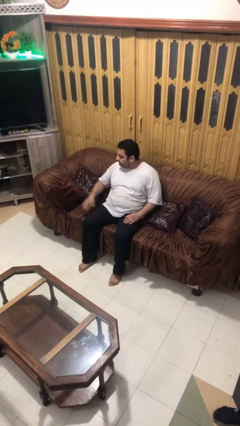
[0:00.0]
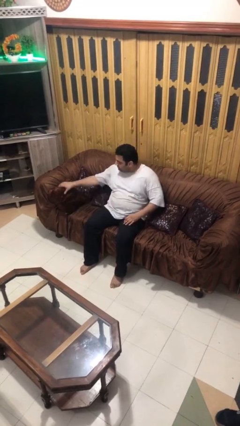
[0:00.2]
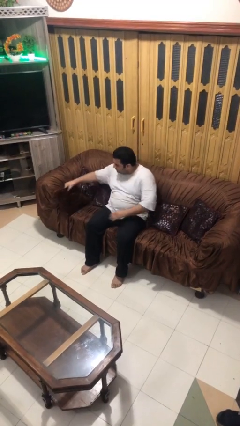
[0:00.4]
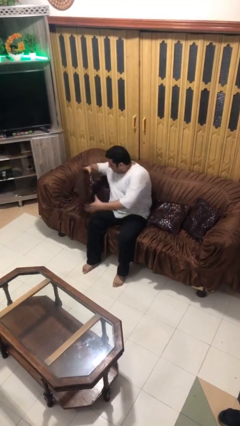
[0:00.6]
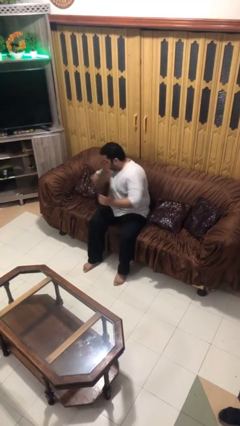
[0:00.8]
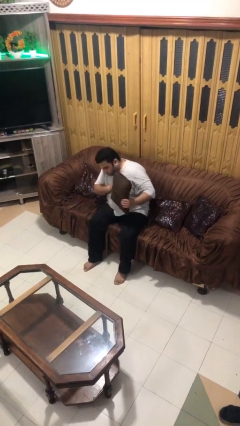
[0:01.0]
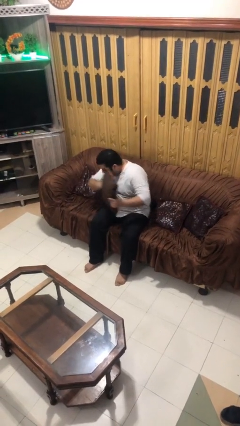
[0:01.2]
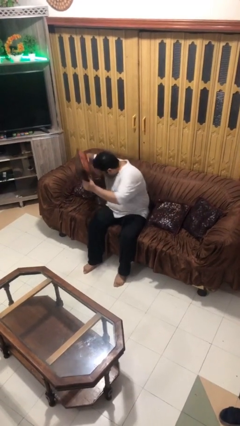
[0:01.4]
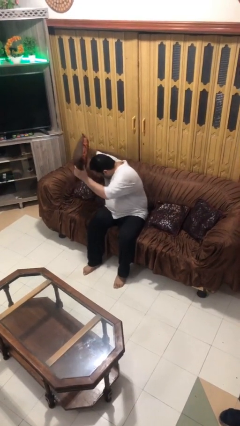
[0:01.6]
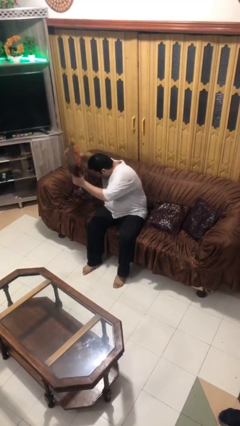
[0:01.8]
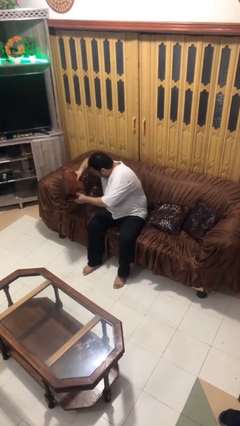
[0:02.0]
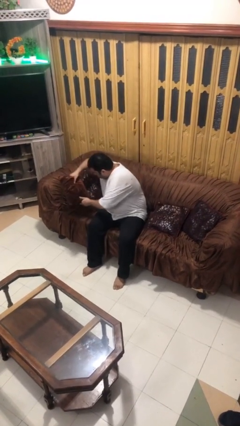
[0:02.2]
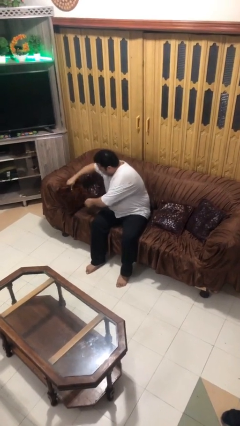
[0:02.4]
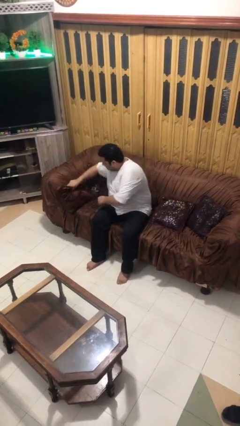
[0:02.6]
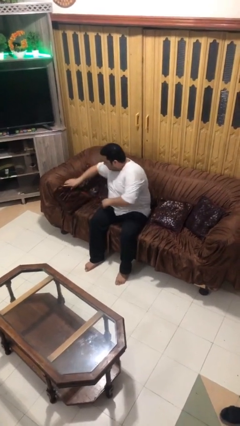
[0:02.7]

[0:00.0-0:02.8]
person searches in couch

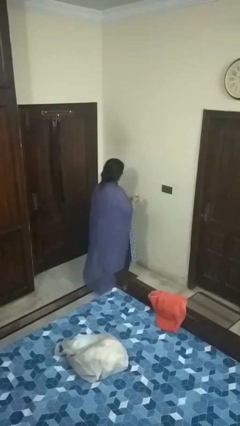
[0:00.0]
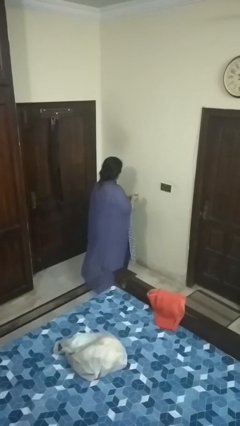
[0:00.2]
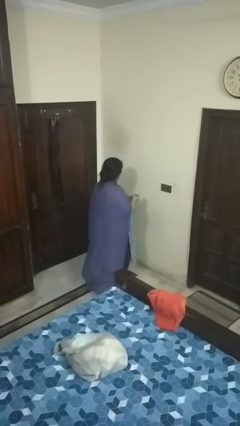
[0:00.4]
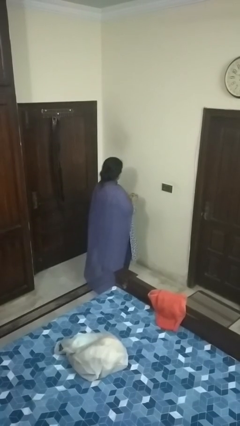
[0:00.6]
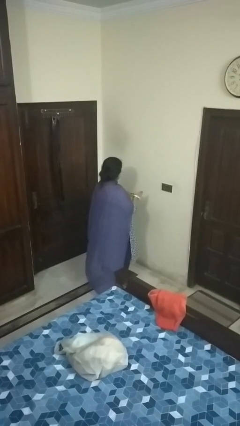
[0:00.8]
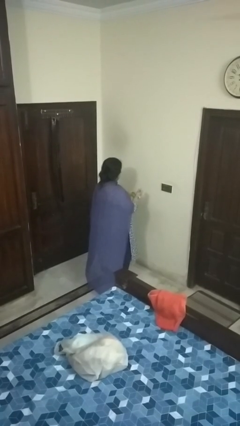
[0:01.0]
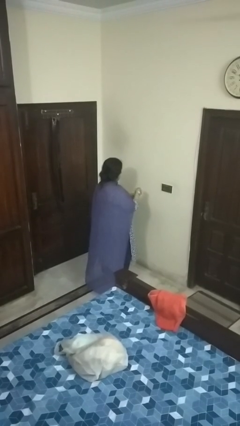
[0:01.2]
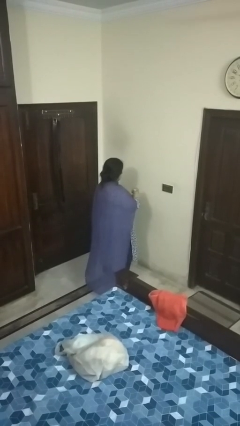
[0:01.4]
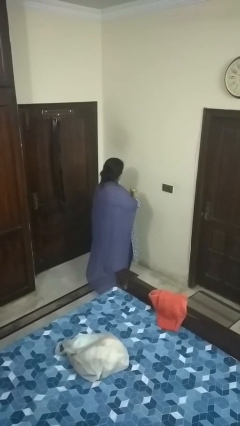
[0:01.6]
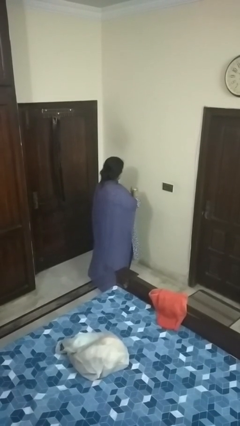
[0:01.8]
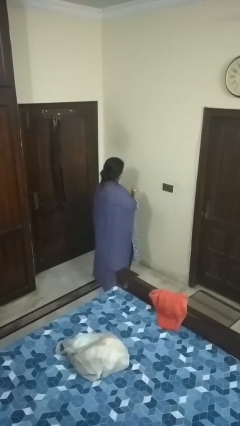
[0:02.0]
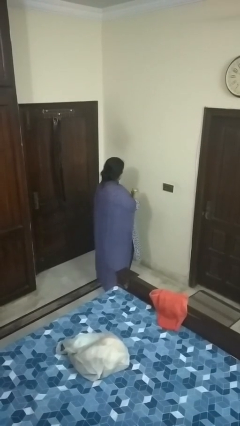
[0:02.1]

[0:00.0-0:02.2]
person puts on wristwatch

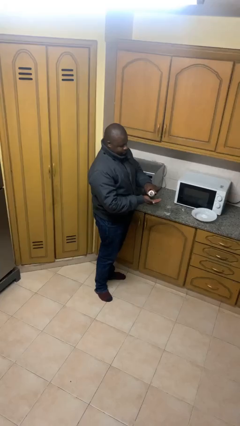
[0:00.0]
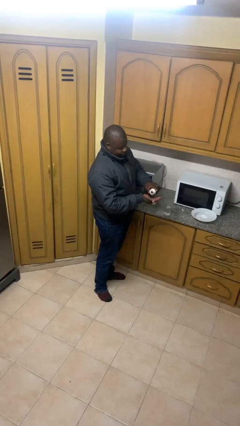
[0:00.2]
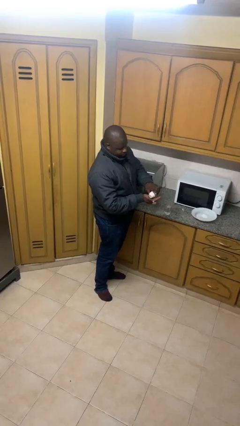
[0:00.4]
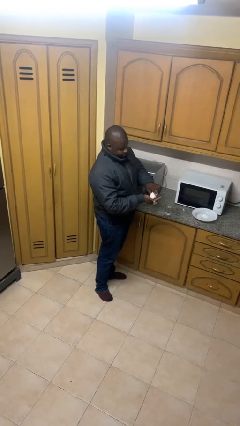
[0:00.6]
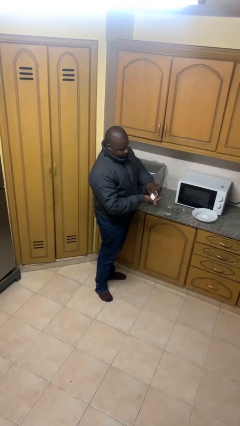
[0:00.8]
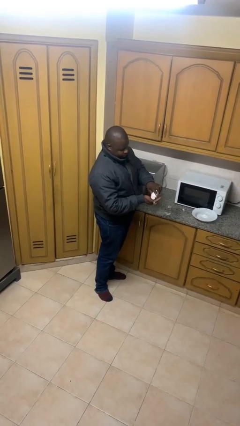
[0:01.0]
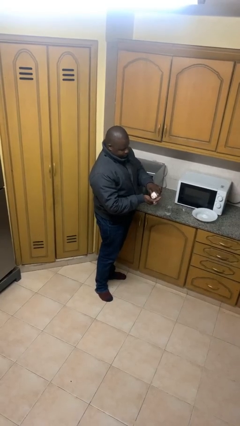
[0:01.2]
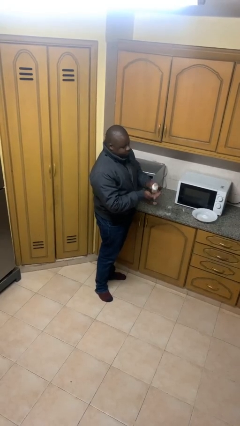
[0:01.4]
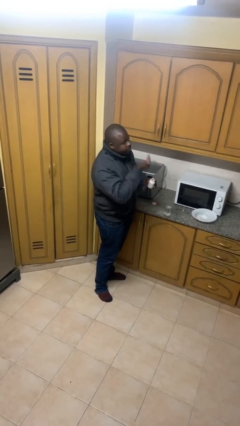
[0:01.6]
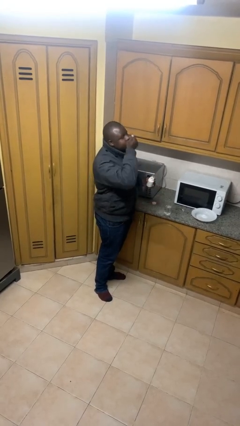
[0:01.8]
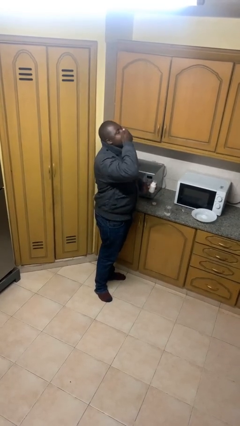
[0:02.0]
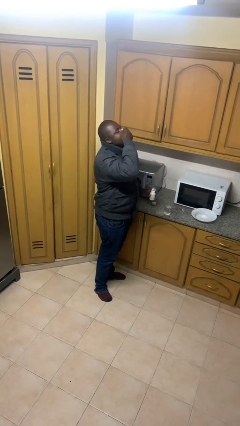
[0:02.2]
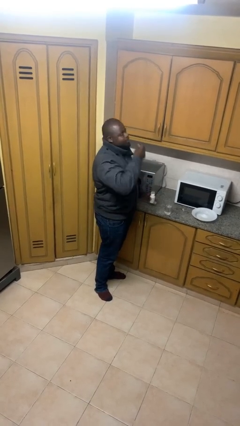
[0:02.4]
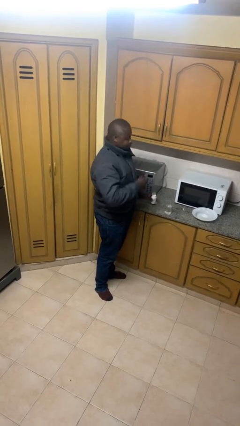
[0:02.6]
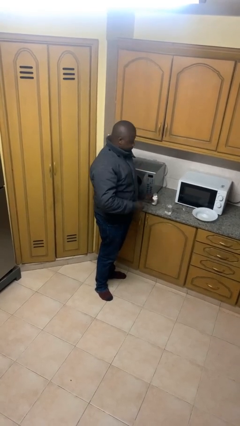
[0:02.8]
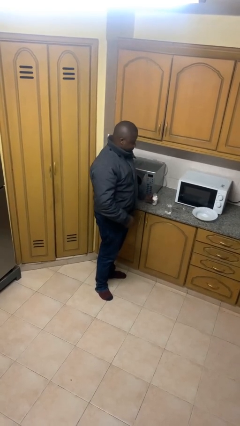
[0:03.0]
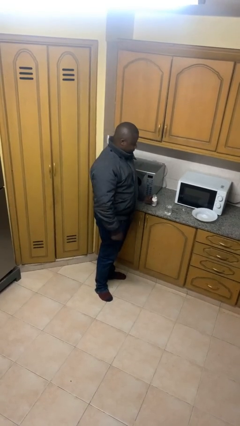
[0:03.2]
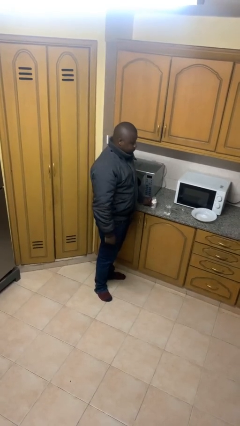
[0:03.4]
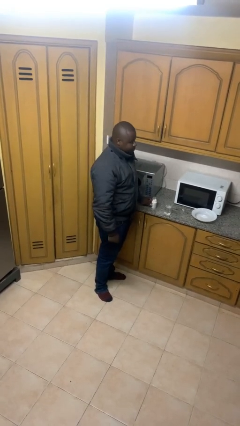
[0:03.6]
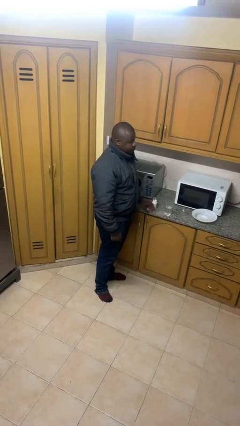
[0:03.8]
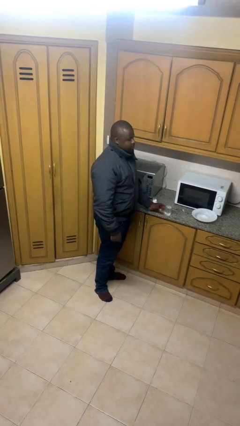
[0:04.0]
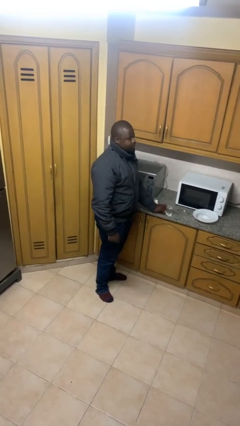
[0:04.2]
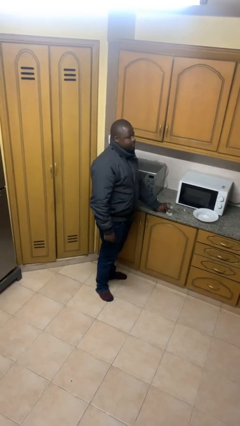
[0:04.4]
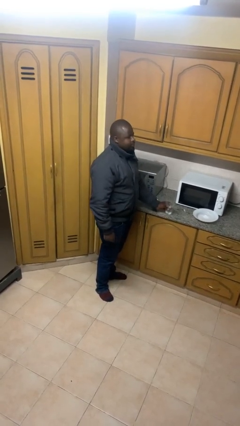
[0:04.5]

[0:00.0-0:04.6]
person takes medicine pills

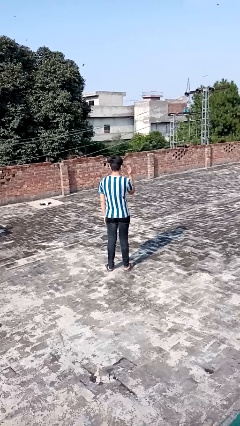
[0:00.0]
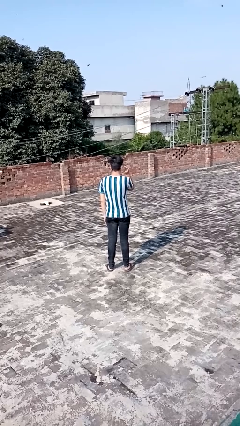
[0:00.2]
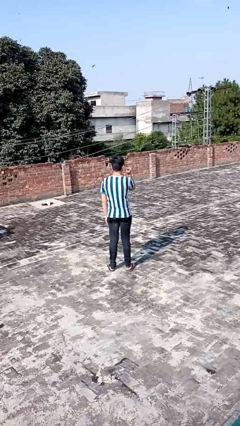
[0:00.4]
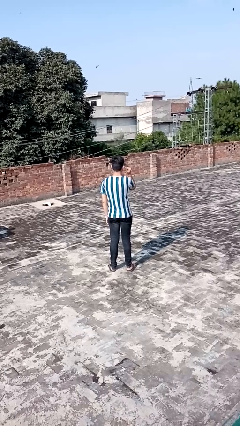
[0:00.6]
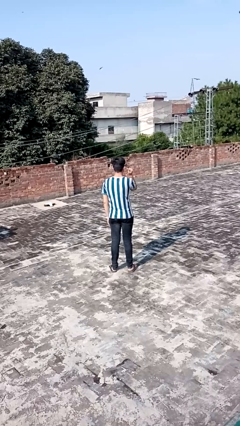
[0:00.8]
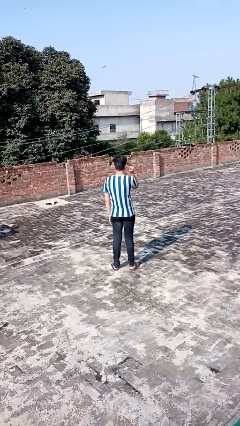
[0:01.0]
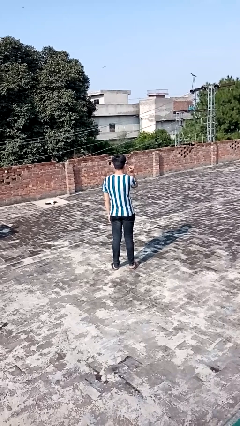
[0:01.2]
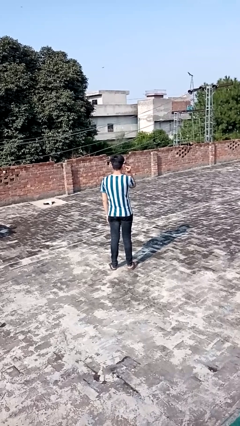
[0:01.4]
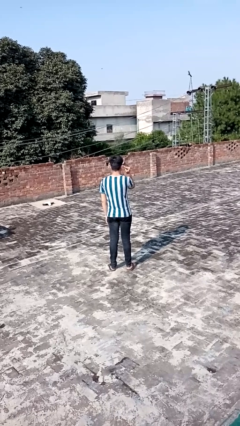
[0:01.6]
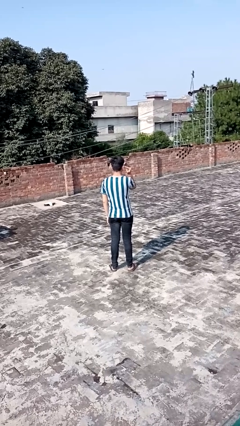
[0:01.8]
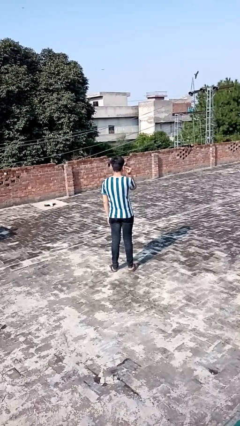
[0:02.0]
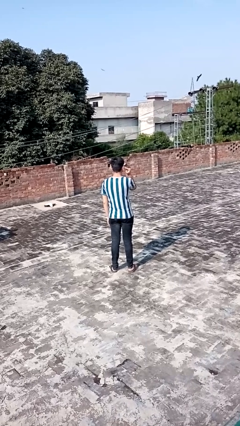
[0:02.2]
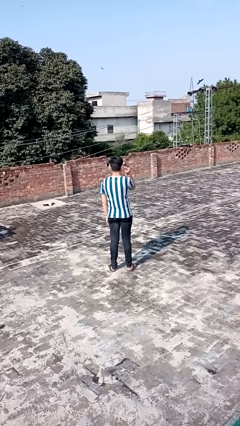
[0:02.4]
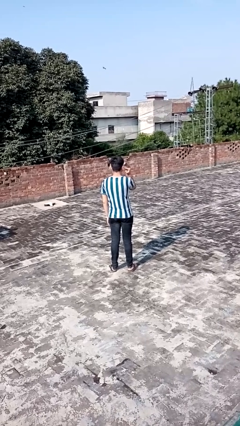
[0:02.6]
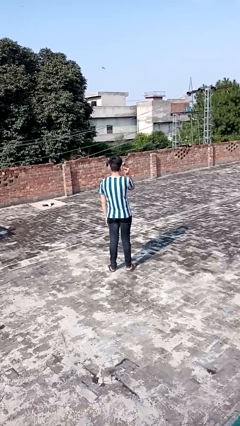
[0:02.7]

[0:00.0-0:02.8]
person gestures listen closely

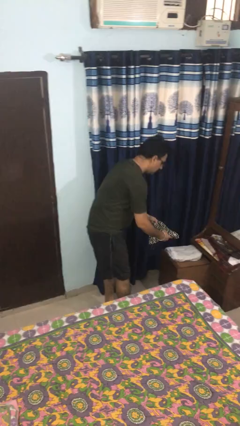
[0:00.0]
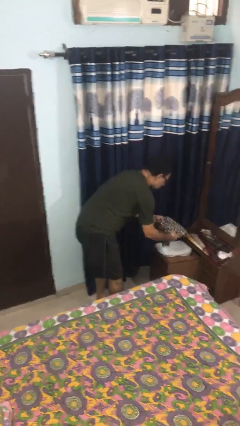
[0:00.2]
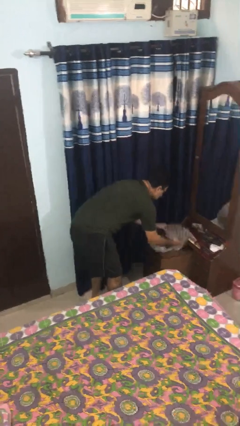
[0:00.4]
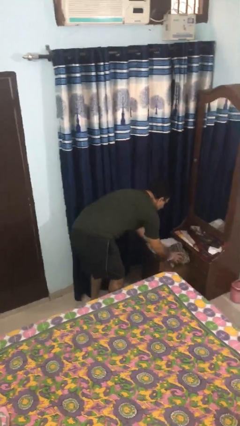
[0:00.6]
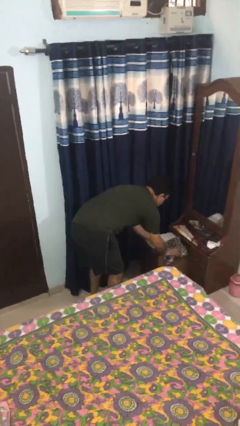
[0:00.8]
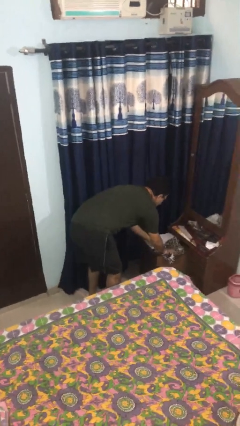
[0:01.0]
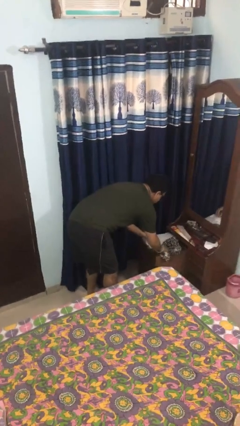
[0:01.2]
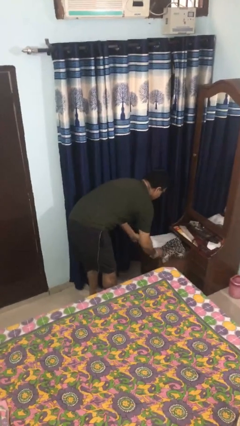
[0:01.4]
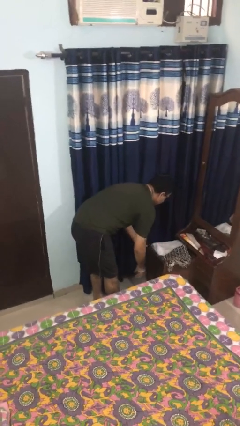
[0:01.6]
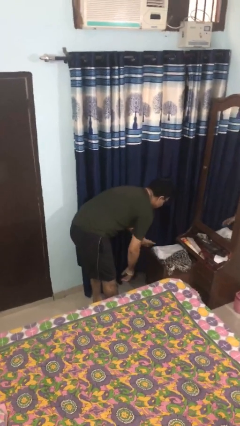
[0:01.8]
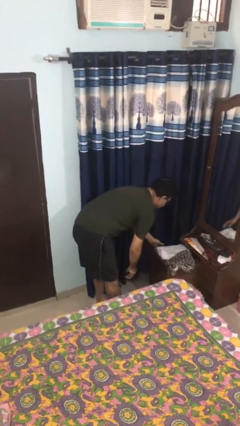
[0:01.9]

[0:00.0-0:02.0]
person puts clothes into dresser

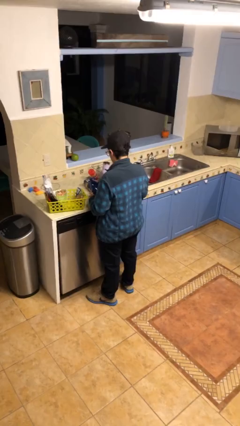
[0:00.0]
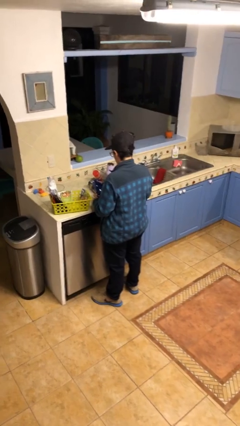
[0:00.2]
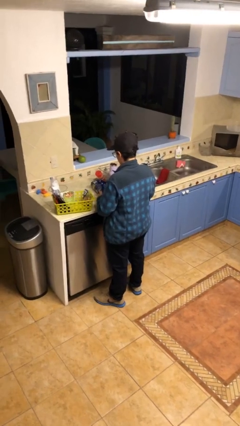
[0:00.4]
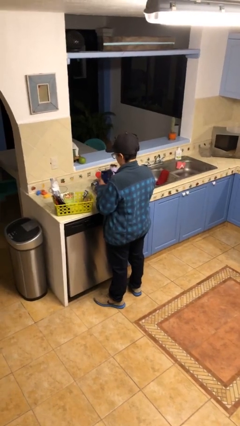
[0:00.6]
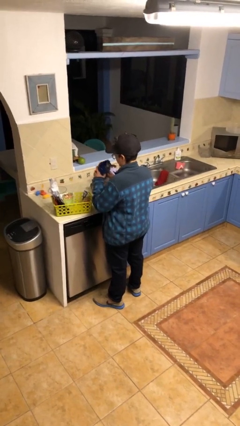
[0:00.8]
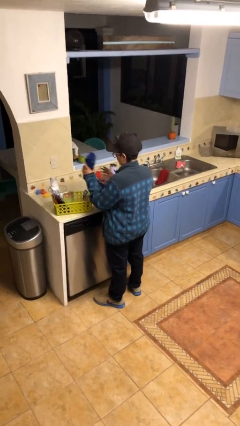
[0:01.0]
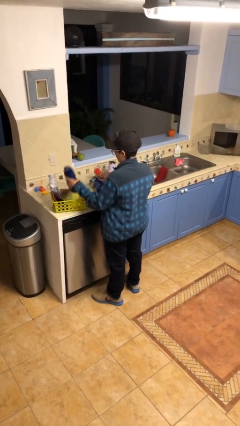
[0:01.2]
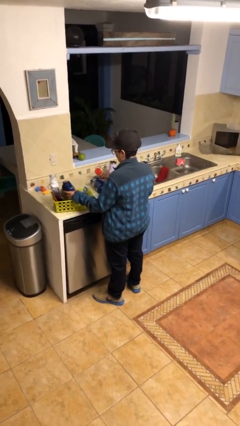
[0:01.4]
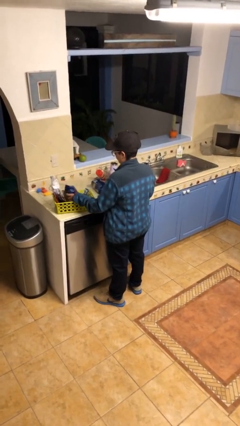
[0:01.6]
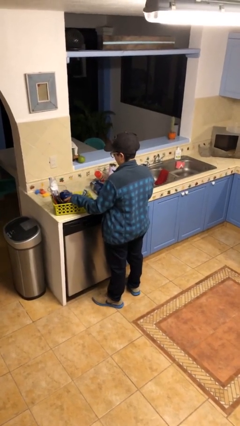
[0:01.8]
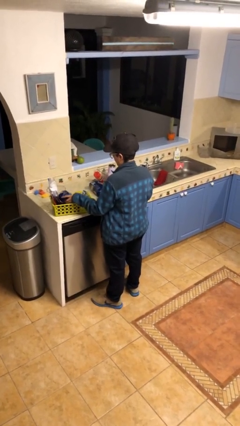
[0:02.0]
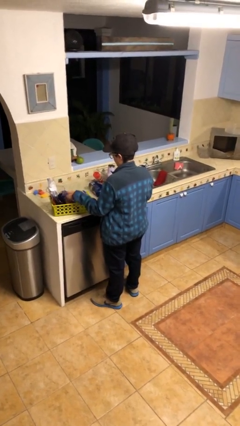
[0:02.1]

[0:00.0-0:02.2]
person puts object into basket

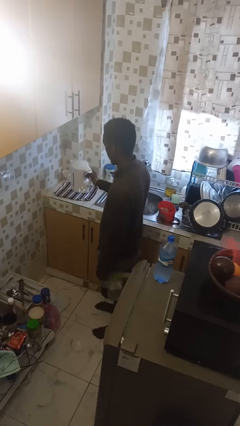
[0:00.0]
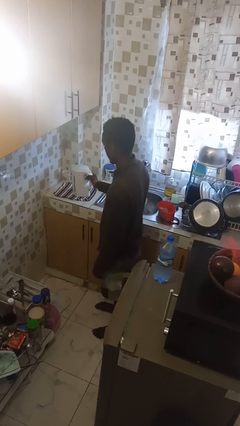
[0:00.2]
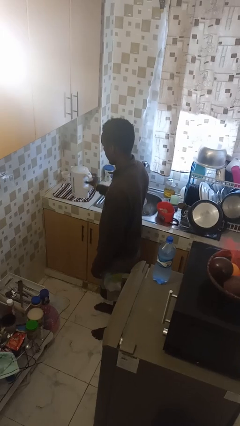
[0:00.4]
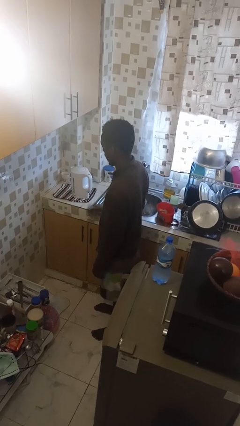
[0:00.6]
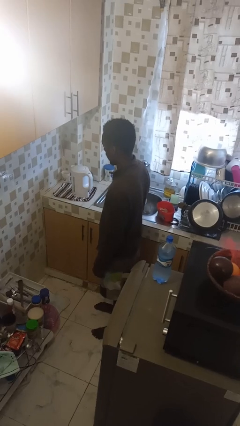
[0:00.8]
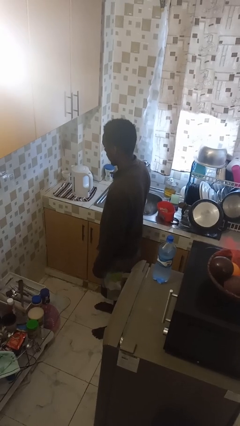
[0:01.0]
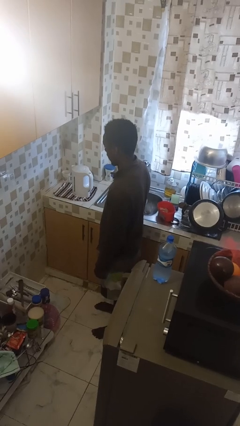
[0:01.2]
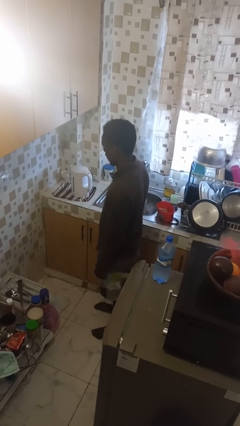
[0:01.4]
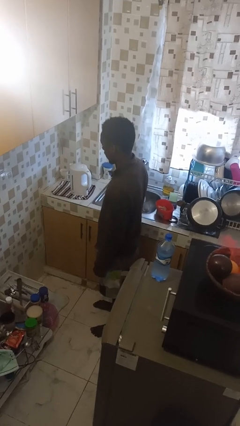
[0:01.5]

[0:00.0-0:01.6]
person puts down object on countertop
